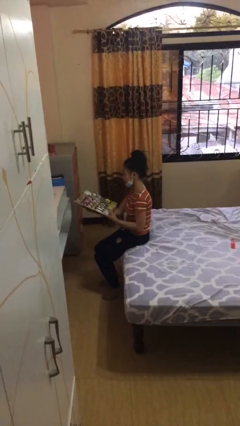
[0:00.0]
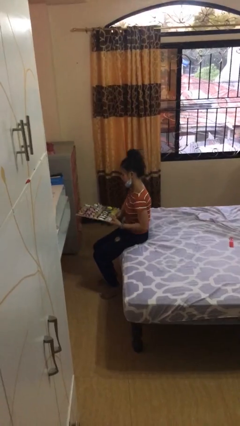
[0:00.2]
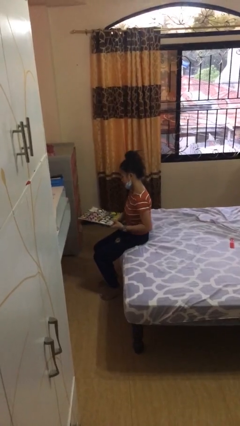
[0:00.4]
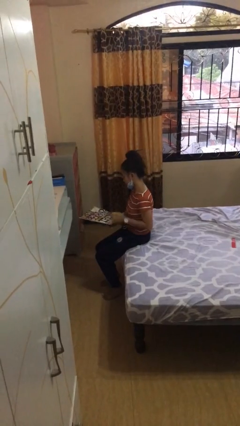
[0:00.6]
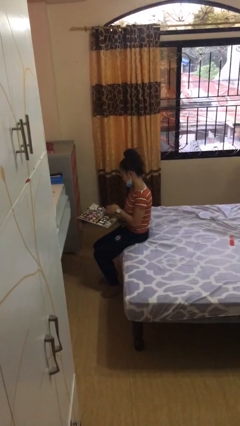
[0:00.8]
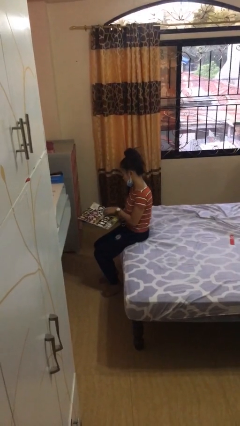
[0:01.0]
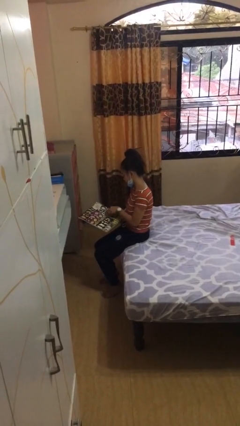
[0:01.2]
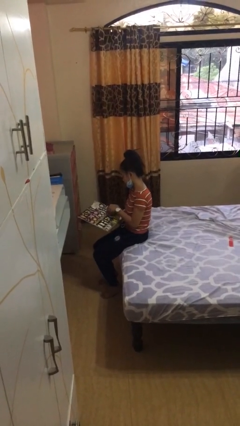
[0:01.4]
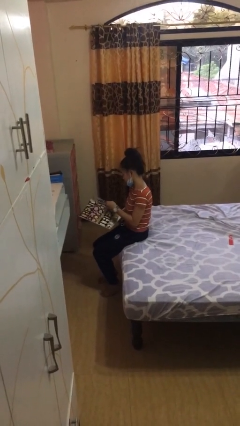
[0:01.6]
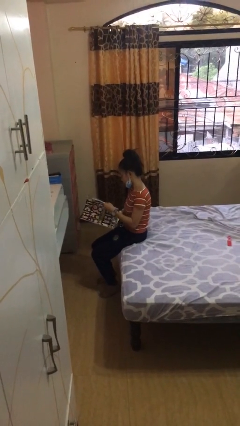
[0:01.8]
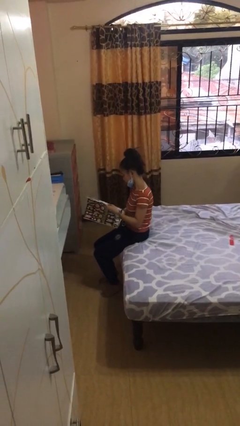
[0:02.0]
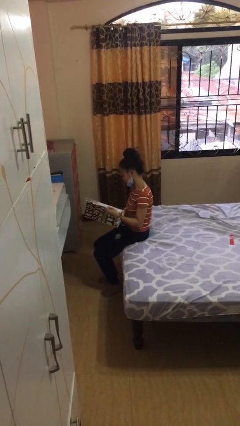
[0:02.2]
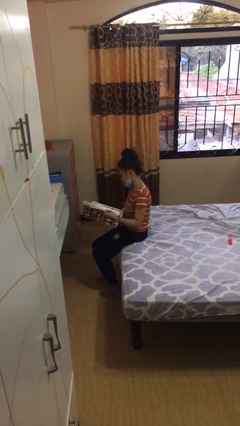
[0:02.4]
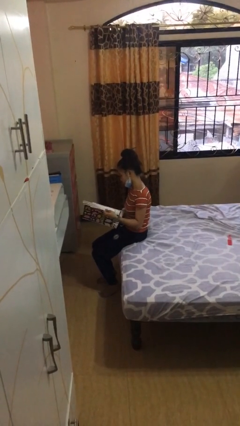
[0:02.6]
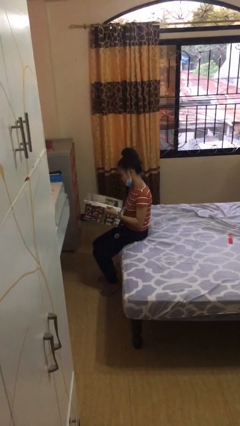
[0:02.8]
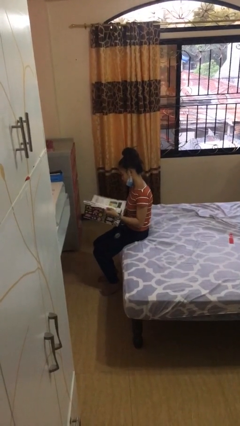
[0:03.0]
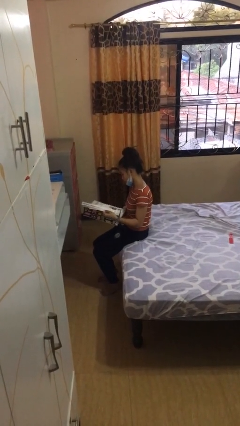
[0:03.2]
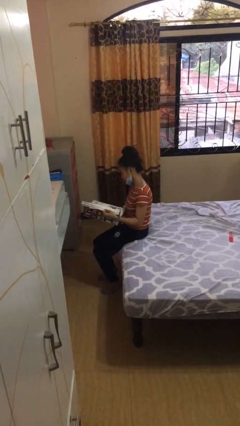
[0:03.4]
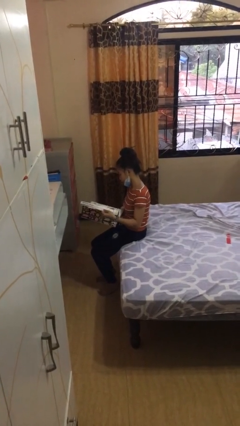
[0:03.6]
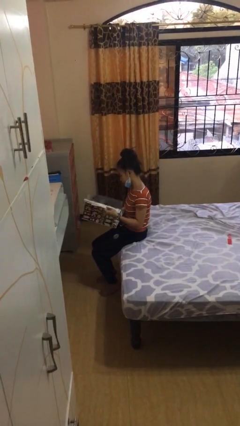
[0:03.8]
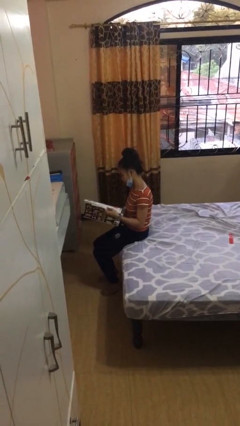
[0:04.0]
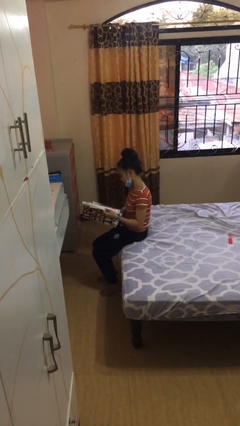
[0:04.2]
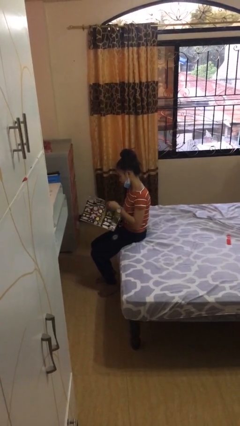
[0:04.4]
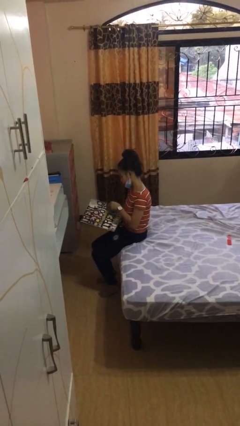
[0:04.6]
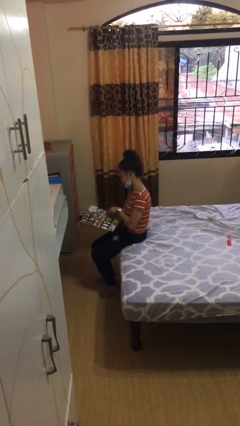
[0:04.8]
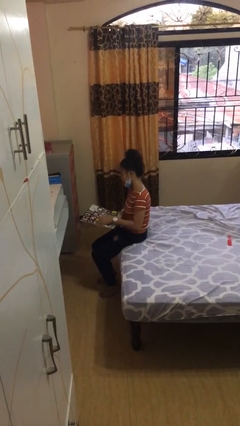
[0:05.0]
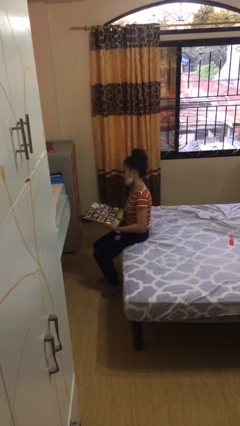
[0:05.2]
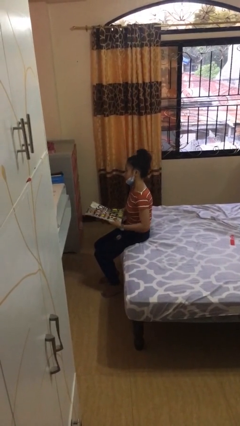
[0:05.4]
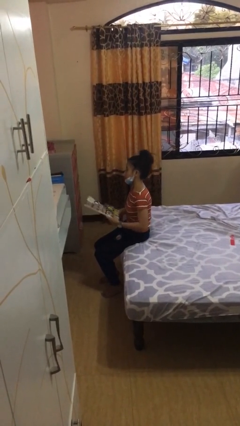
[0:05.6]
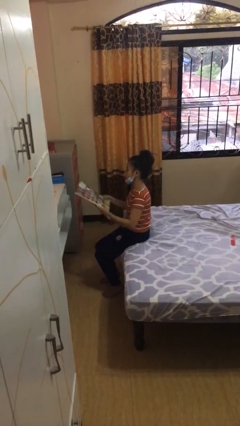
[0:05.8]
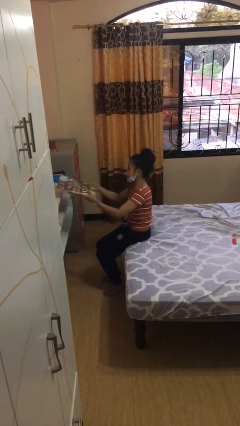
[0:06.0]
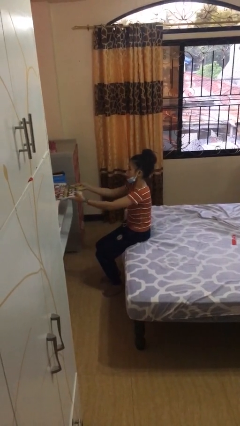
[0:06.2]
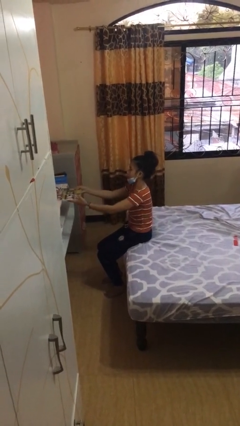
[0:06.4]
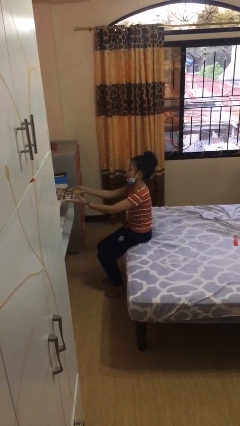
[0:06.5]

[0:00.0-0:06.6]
person reads document

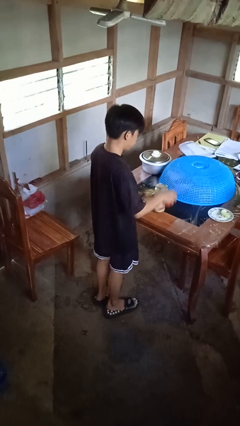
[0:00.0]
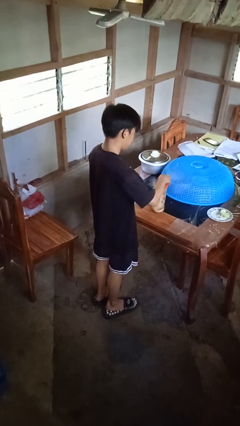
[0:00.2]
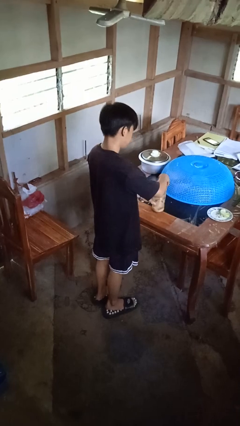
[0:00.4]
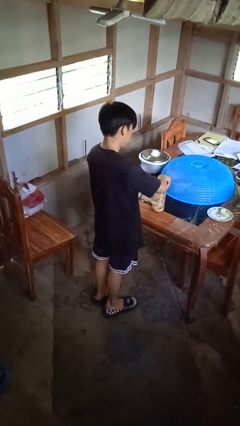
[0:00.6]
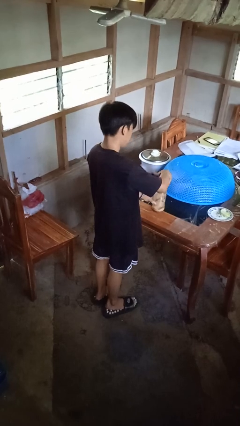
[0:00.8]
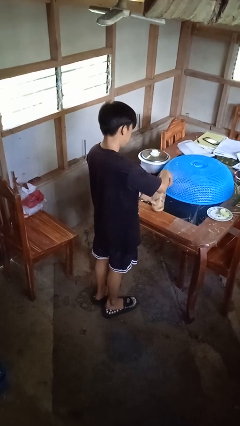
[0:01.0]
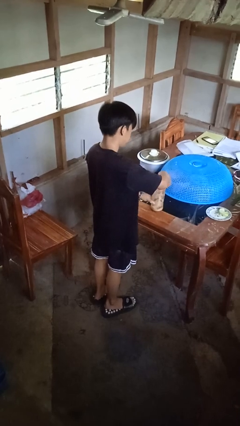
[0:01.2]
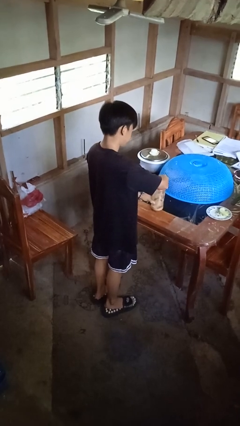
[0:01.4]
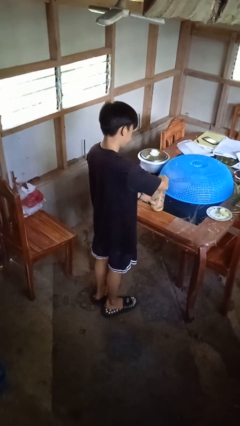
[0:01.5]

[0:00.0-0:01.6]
person closes jar

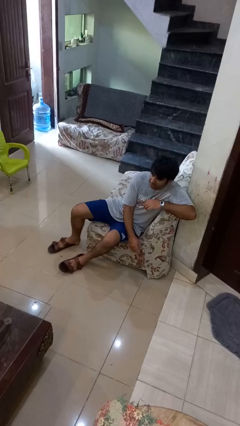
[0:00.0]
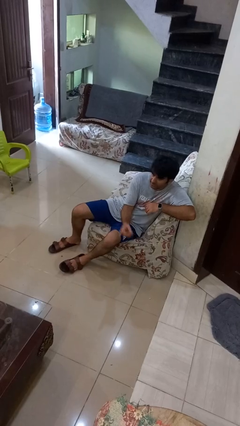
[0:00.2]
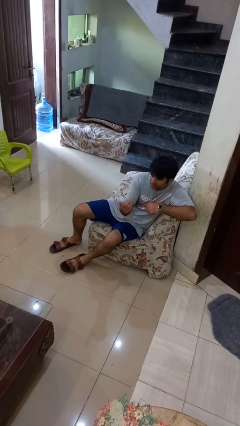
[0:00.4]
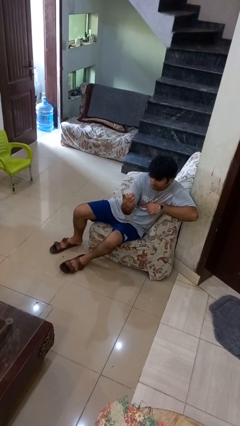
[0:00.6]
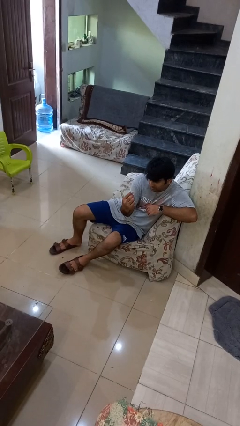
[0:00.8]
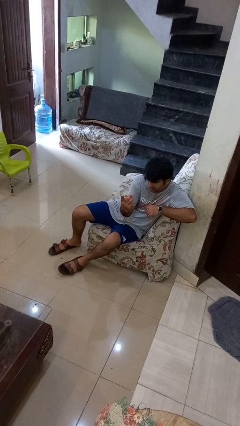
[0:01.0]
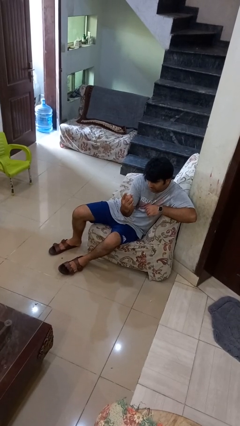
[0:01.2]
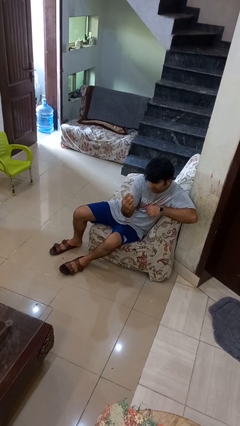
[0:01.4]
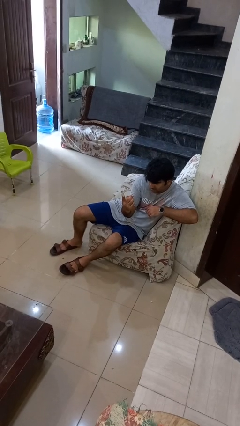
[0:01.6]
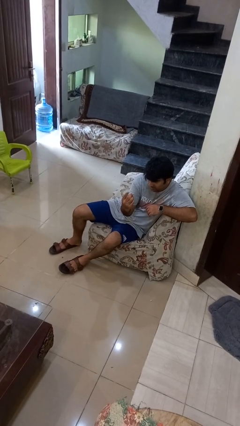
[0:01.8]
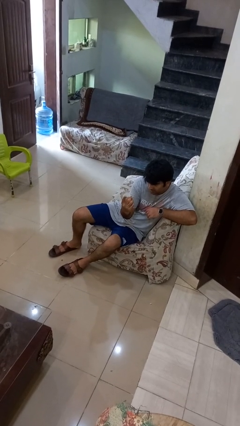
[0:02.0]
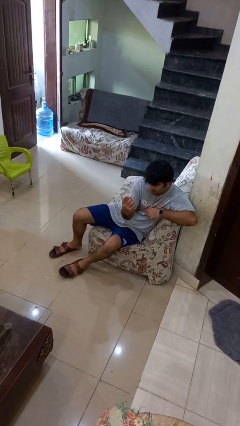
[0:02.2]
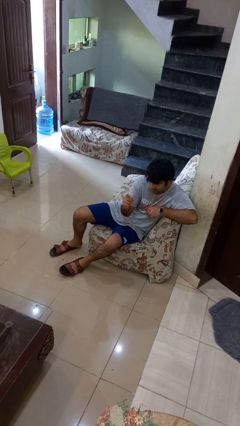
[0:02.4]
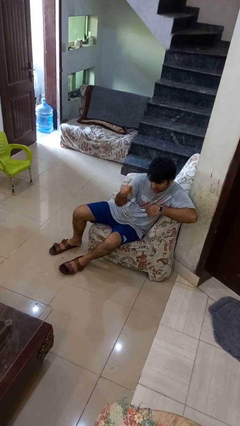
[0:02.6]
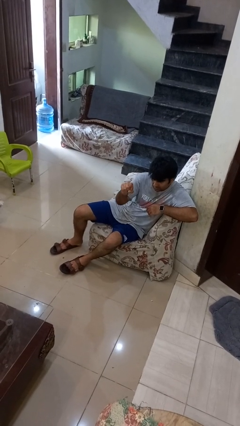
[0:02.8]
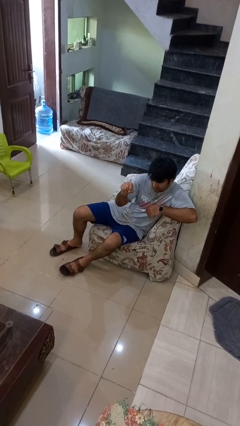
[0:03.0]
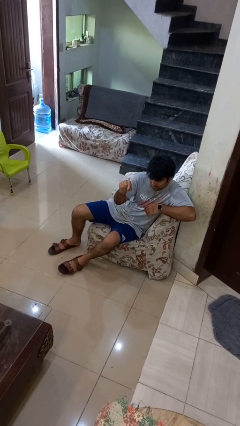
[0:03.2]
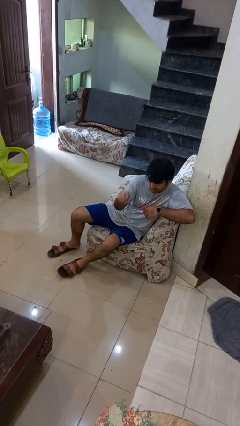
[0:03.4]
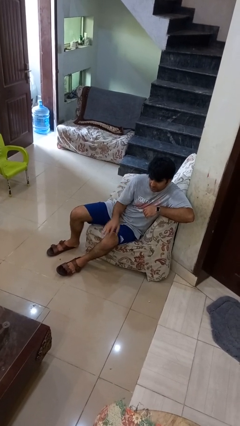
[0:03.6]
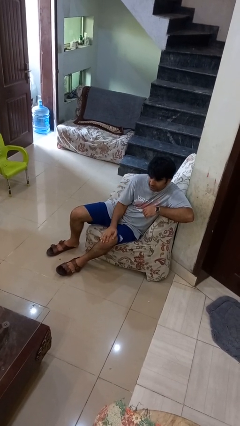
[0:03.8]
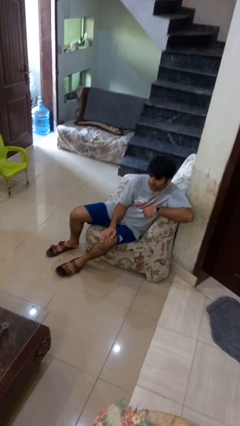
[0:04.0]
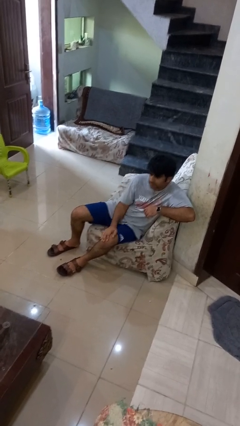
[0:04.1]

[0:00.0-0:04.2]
person gestures come here

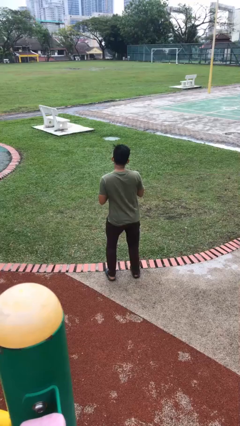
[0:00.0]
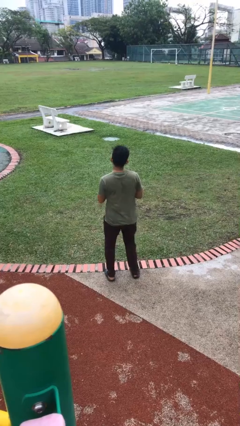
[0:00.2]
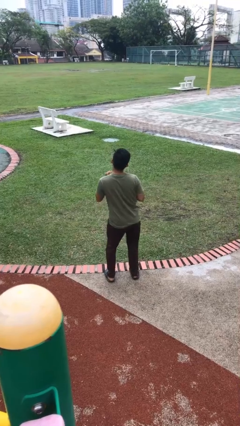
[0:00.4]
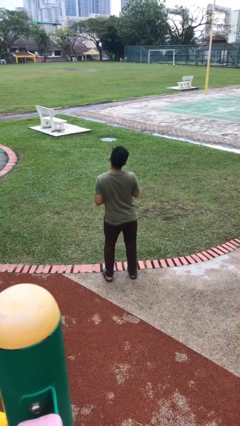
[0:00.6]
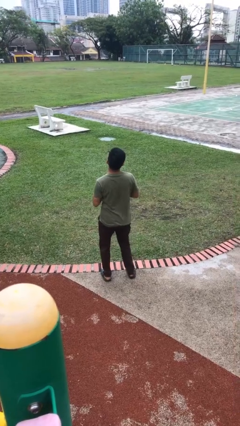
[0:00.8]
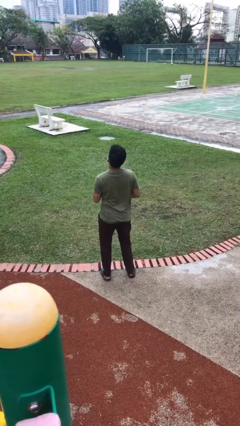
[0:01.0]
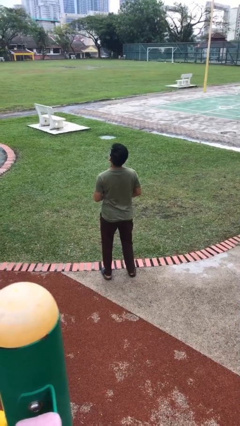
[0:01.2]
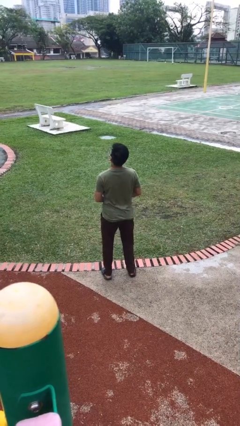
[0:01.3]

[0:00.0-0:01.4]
person wiggles hips

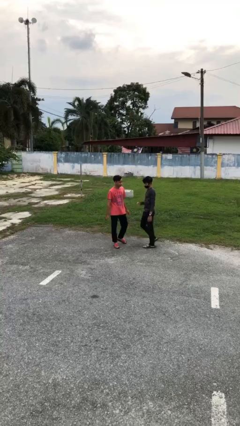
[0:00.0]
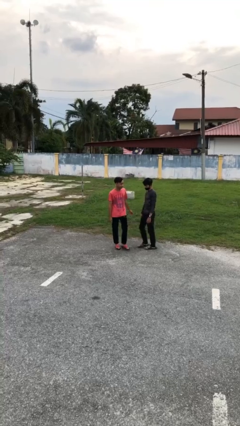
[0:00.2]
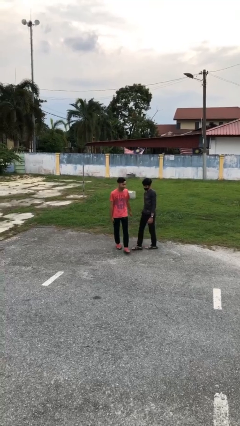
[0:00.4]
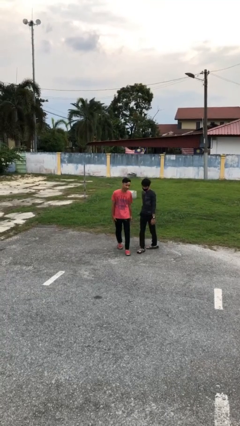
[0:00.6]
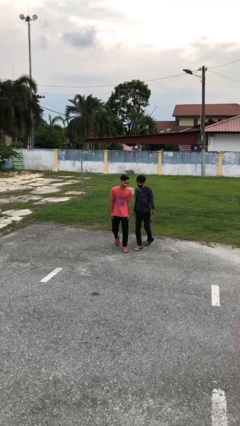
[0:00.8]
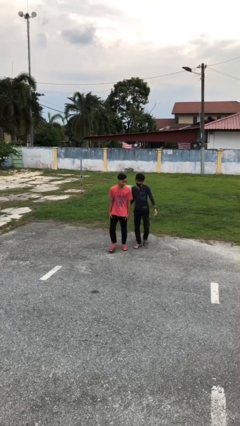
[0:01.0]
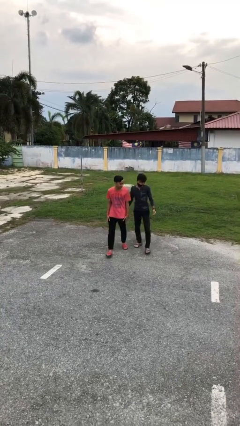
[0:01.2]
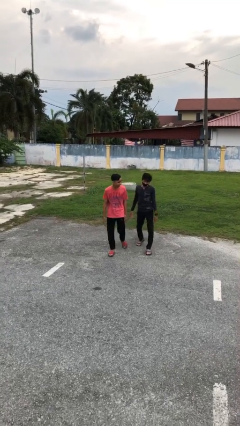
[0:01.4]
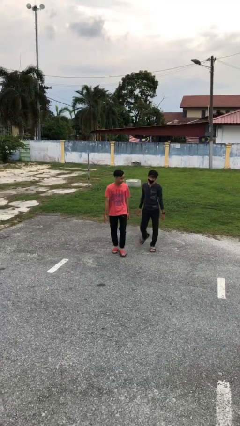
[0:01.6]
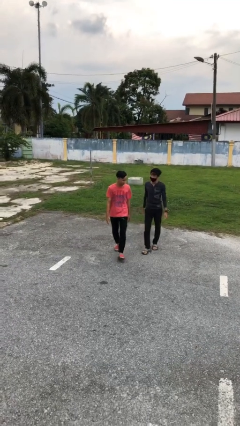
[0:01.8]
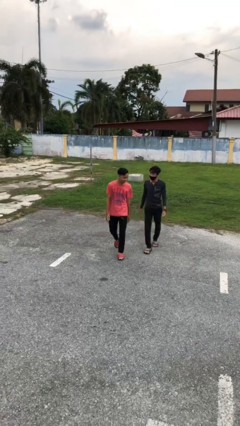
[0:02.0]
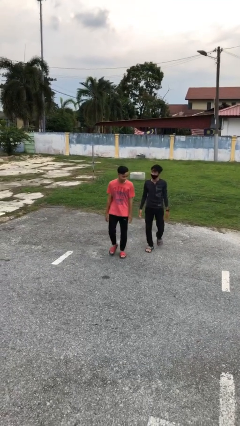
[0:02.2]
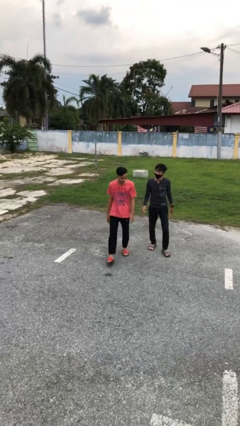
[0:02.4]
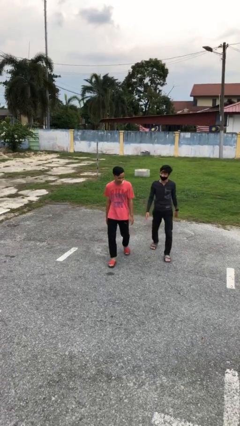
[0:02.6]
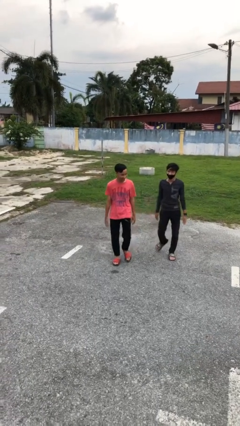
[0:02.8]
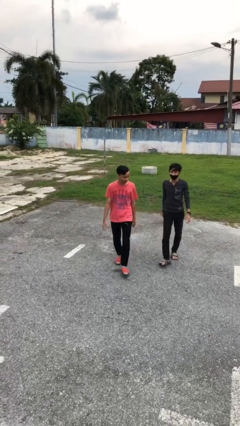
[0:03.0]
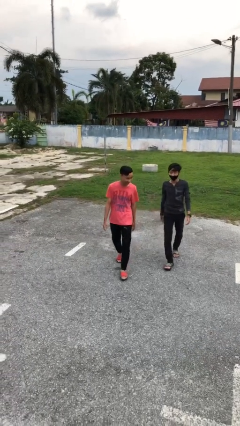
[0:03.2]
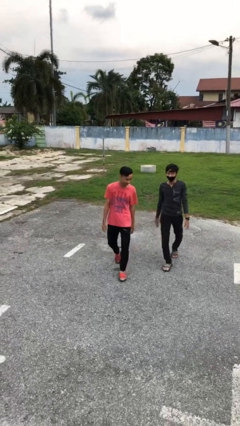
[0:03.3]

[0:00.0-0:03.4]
person talks to person

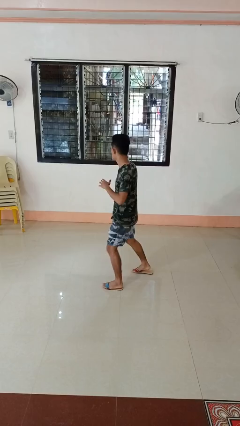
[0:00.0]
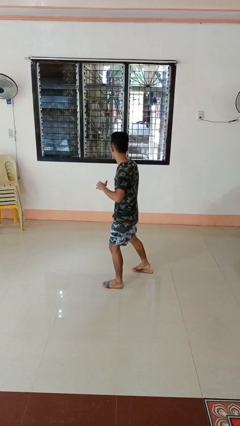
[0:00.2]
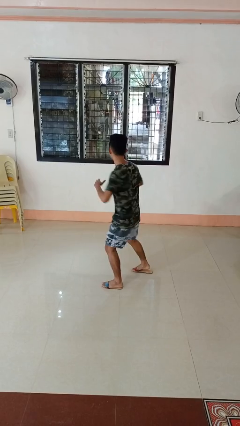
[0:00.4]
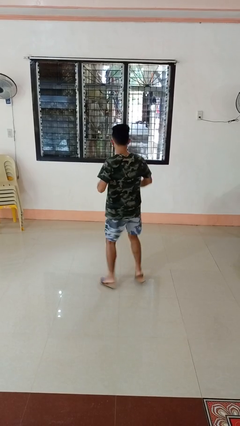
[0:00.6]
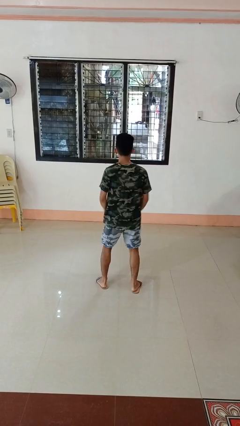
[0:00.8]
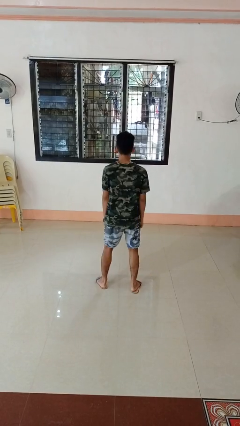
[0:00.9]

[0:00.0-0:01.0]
person karate chop
